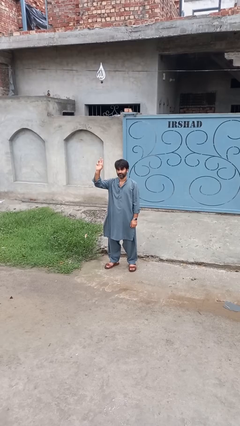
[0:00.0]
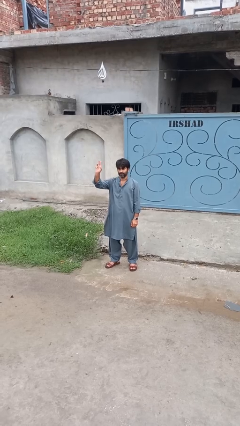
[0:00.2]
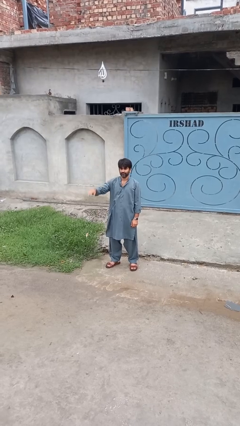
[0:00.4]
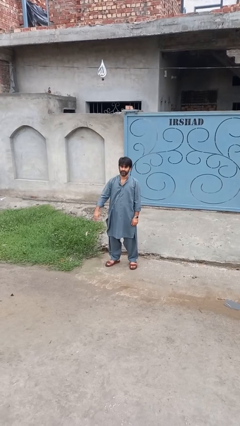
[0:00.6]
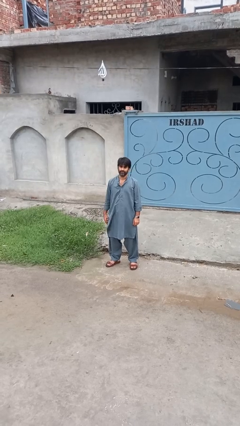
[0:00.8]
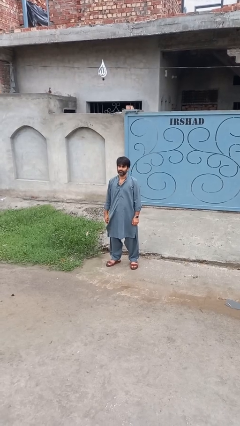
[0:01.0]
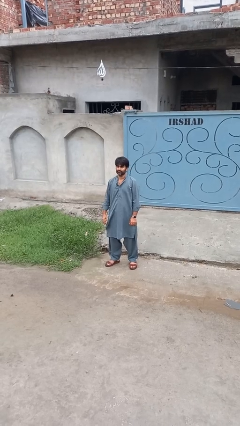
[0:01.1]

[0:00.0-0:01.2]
person gestures lower hand

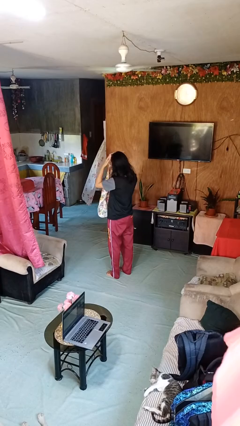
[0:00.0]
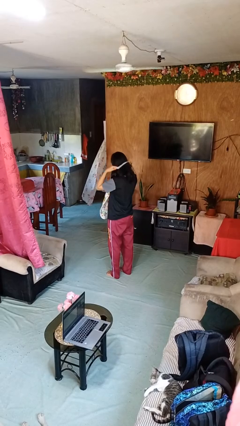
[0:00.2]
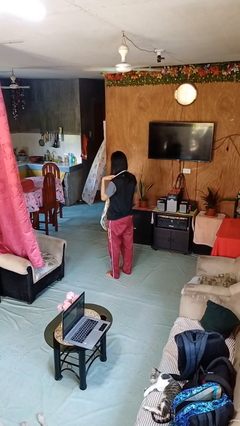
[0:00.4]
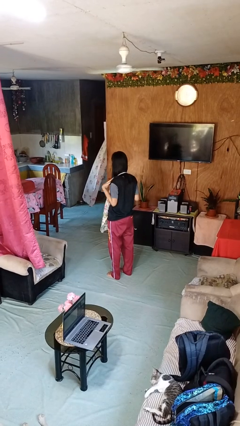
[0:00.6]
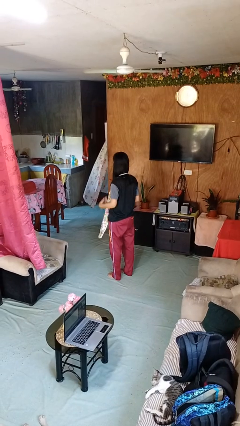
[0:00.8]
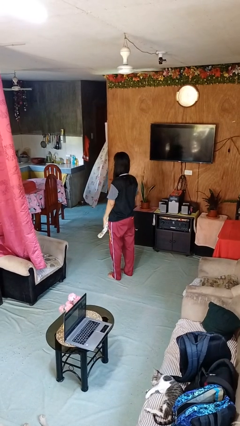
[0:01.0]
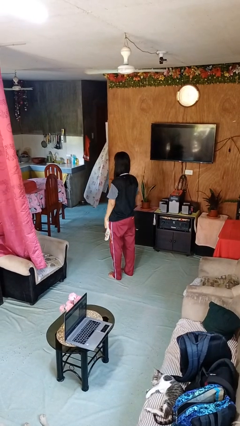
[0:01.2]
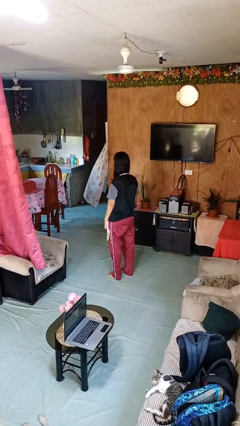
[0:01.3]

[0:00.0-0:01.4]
person puts on apron

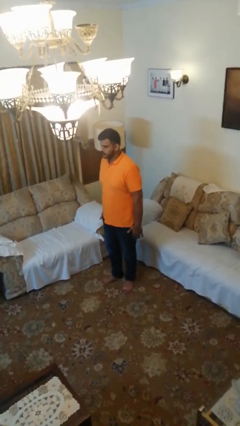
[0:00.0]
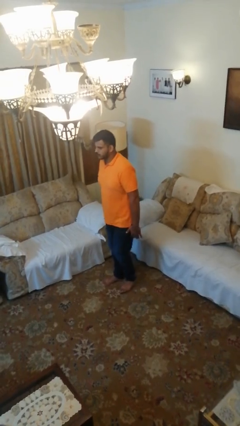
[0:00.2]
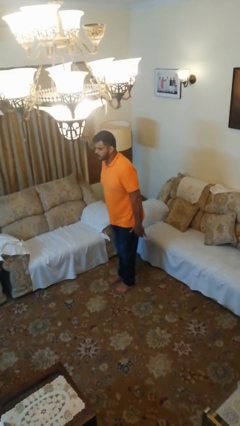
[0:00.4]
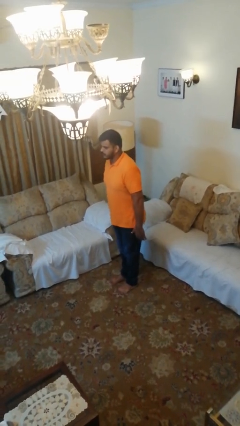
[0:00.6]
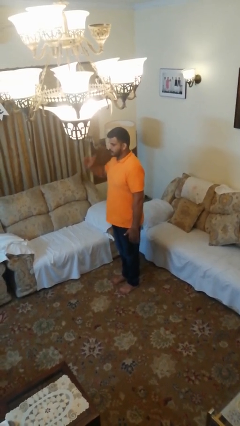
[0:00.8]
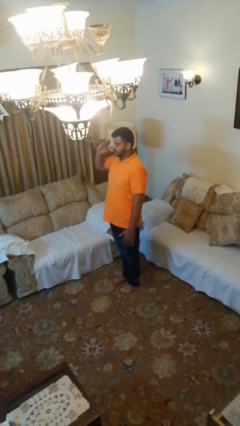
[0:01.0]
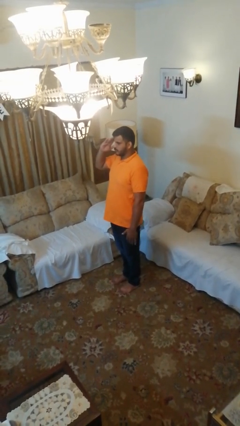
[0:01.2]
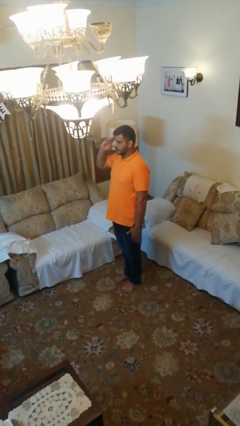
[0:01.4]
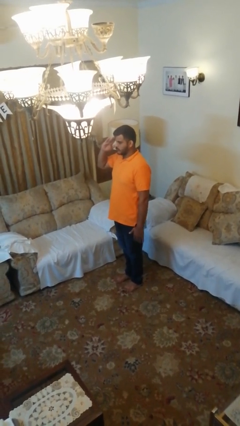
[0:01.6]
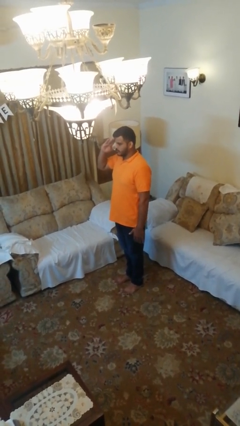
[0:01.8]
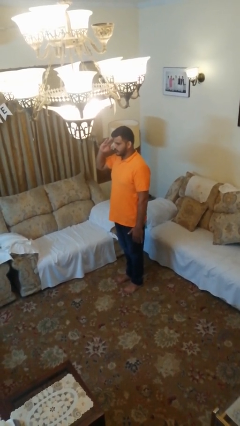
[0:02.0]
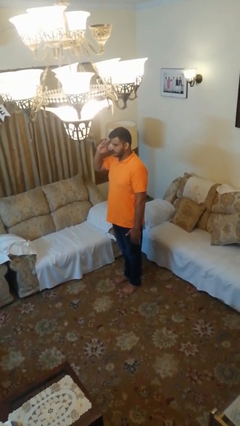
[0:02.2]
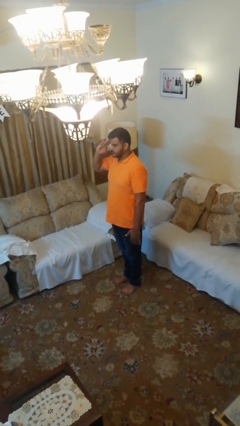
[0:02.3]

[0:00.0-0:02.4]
person salutes

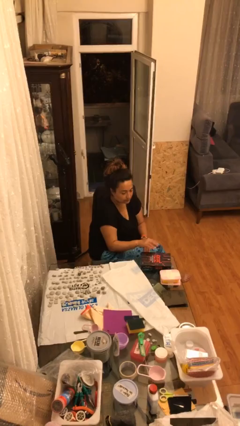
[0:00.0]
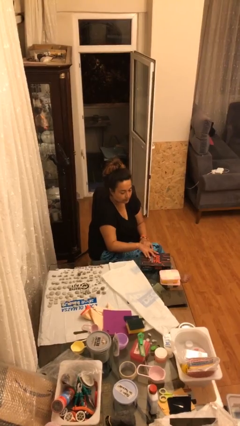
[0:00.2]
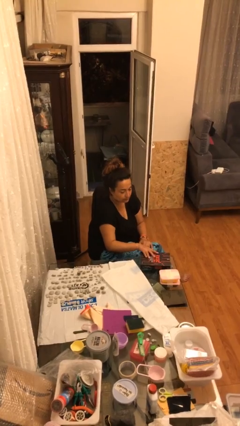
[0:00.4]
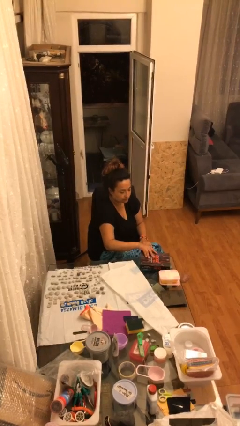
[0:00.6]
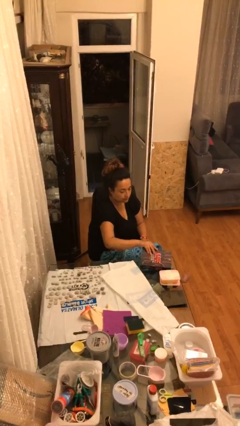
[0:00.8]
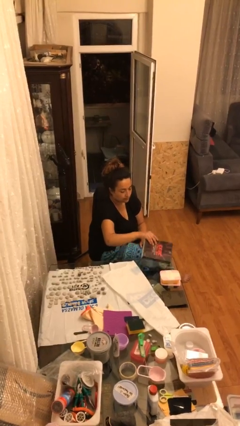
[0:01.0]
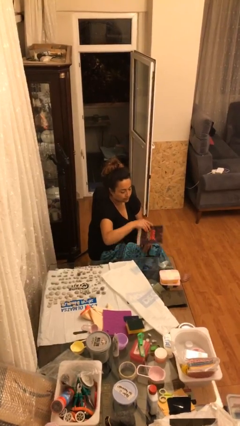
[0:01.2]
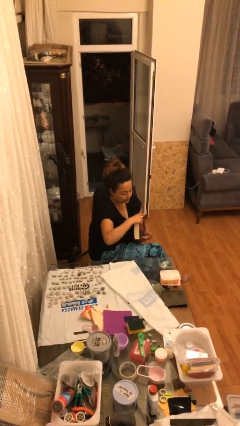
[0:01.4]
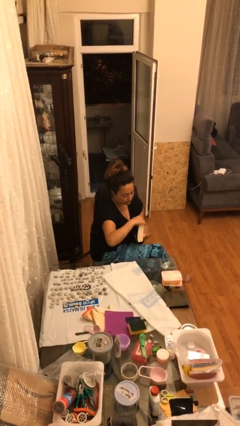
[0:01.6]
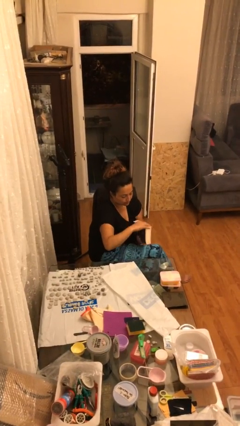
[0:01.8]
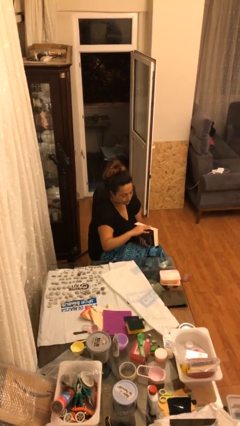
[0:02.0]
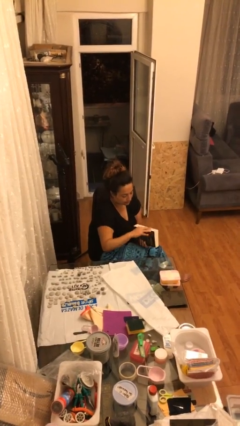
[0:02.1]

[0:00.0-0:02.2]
person picks up object from table

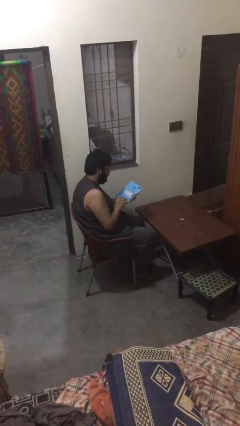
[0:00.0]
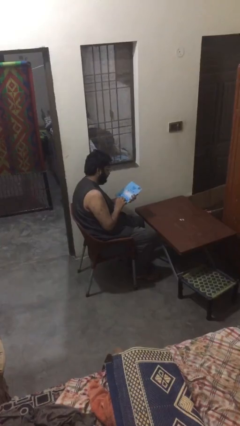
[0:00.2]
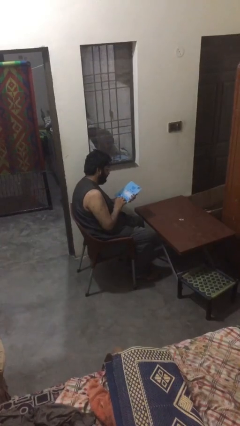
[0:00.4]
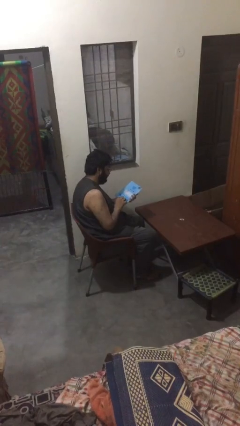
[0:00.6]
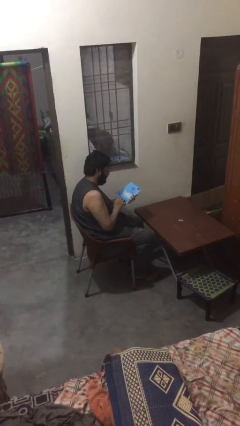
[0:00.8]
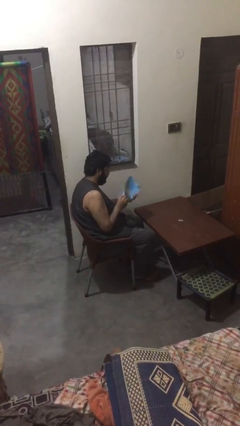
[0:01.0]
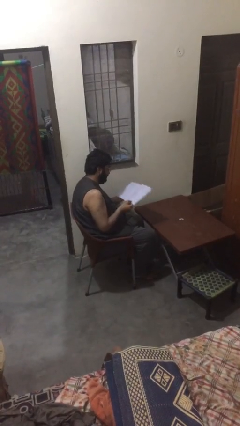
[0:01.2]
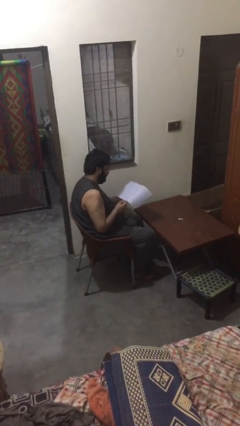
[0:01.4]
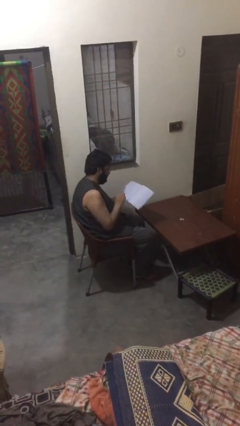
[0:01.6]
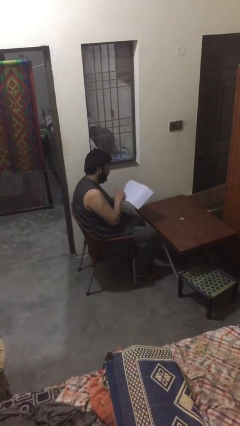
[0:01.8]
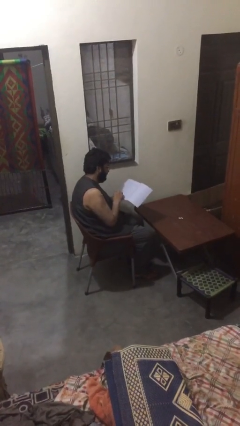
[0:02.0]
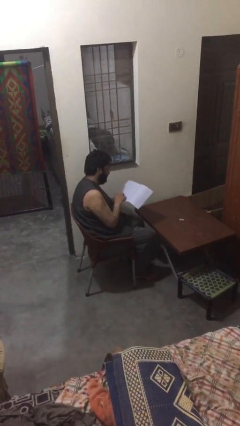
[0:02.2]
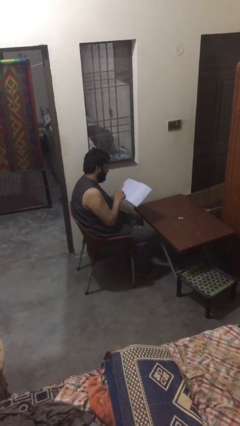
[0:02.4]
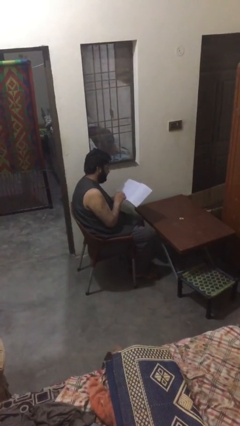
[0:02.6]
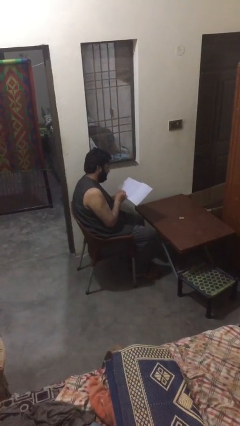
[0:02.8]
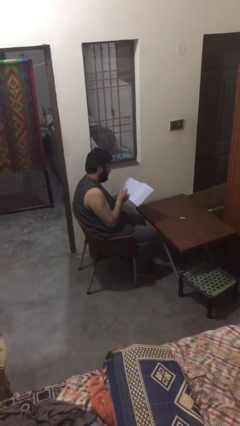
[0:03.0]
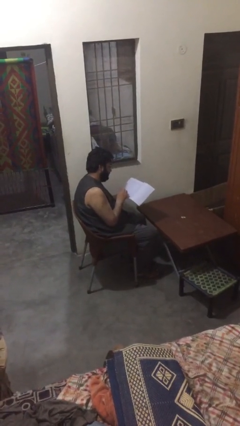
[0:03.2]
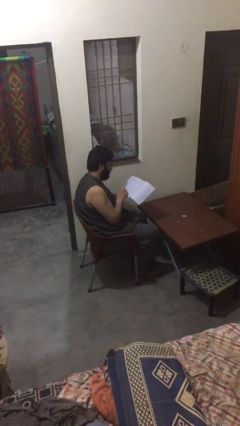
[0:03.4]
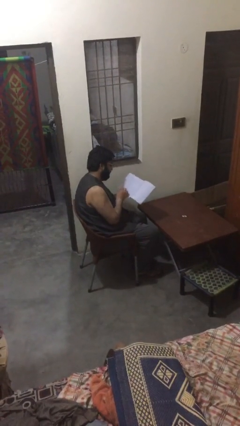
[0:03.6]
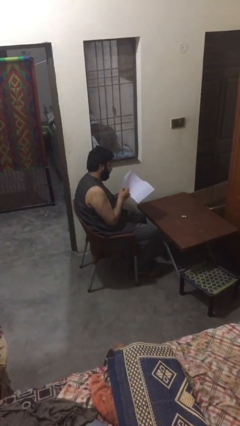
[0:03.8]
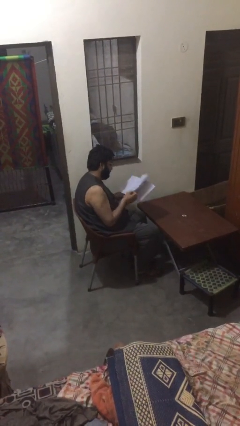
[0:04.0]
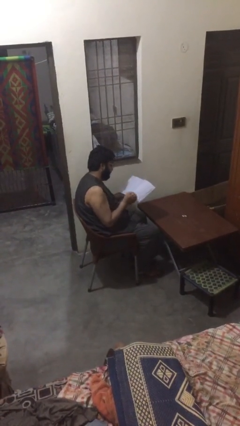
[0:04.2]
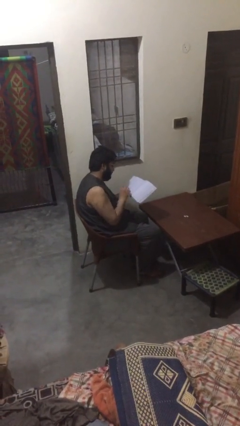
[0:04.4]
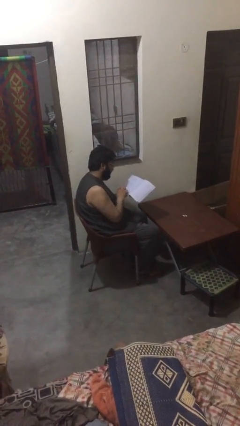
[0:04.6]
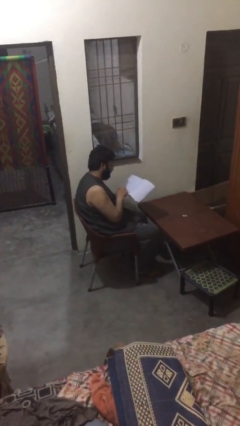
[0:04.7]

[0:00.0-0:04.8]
person reads document

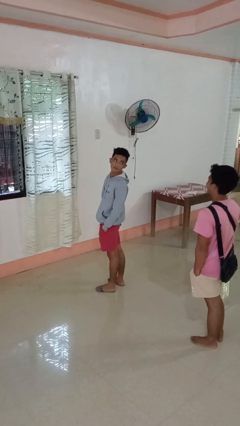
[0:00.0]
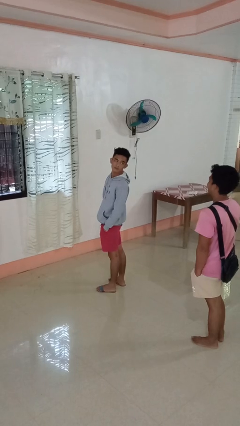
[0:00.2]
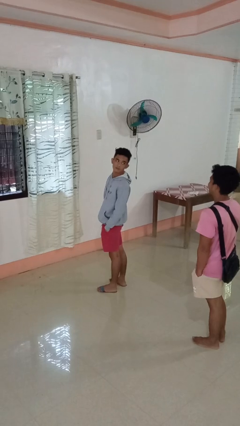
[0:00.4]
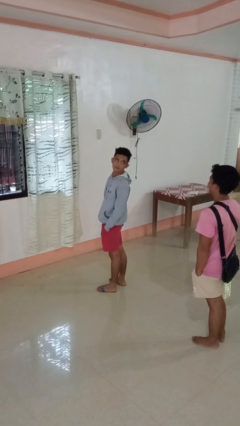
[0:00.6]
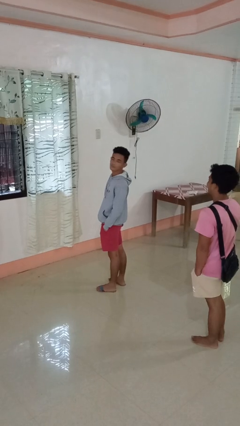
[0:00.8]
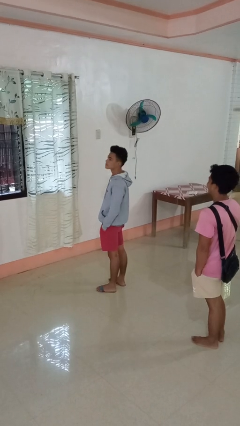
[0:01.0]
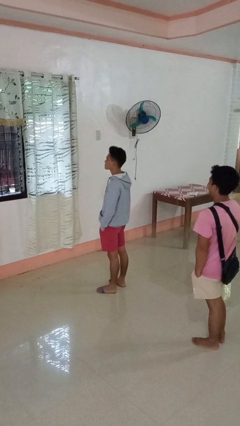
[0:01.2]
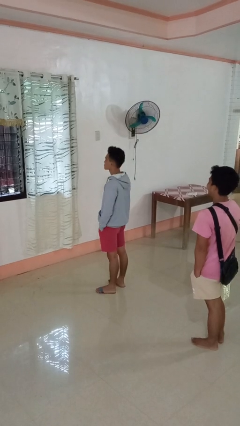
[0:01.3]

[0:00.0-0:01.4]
person looks over shoulder

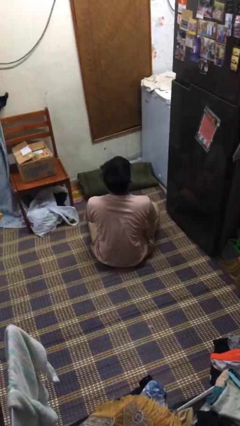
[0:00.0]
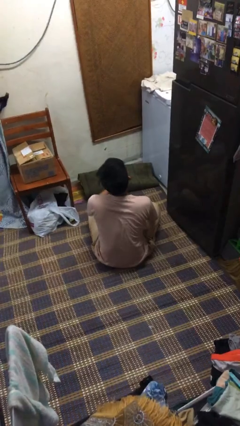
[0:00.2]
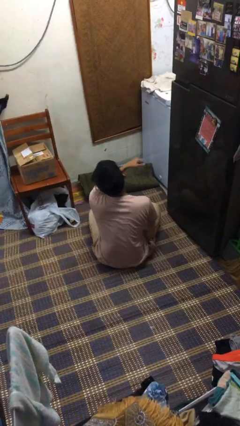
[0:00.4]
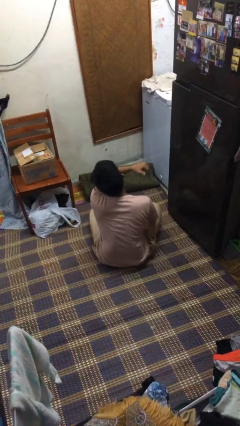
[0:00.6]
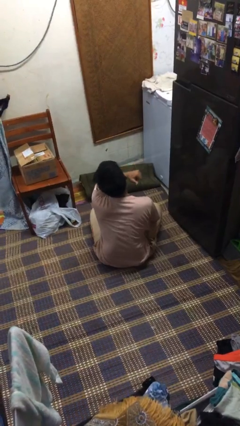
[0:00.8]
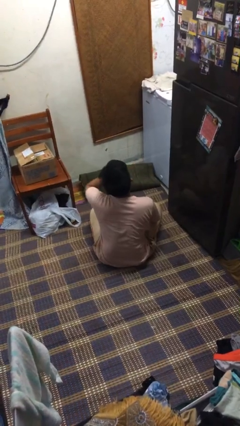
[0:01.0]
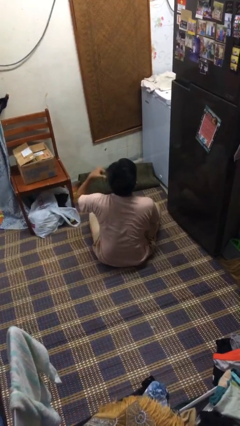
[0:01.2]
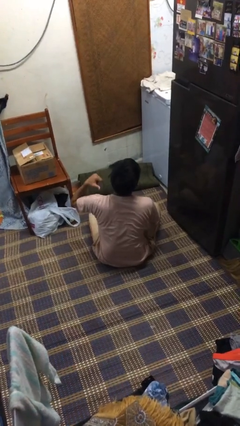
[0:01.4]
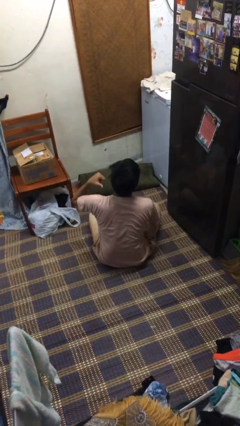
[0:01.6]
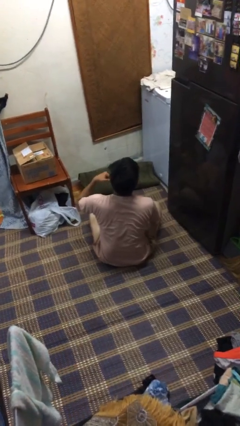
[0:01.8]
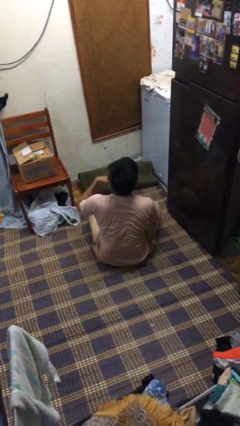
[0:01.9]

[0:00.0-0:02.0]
person gestures cut

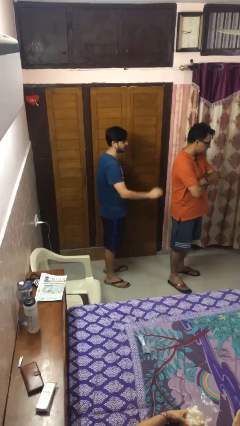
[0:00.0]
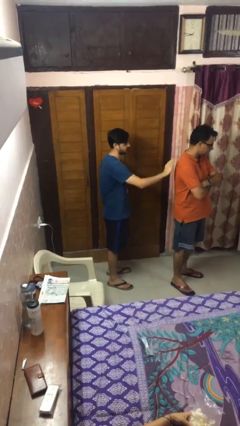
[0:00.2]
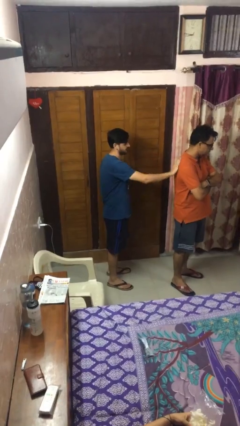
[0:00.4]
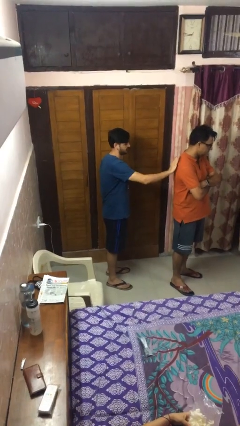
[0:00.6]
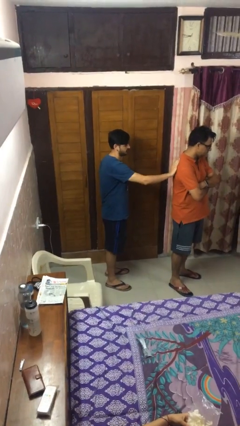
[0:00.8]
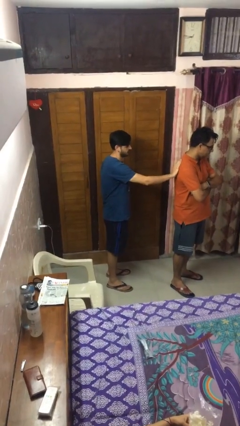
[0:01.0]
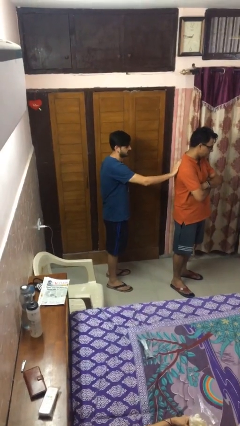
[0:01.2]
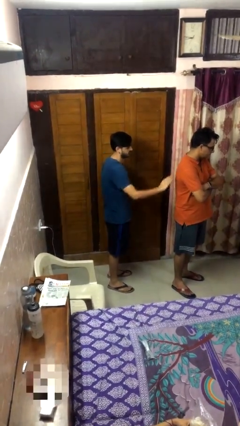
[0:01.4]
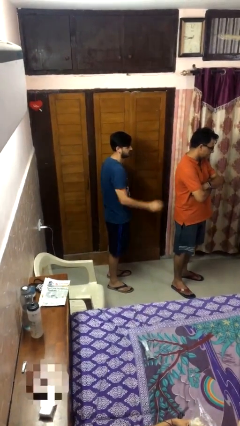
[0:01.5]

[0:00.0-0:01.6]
person touches back of person
